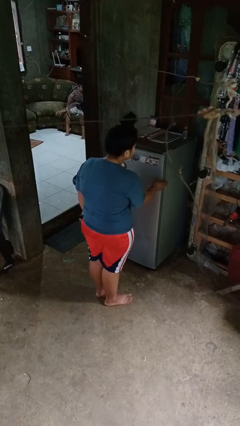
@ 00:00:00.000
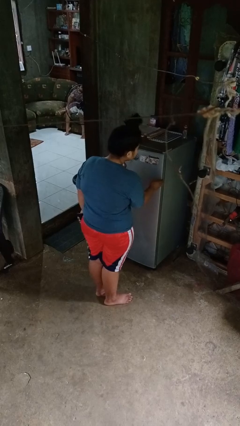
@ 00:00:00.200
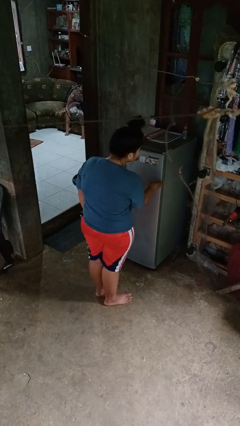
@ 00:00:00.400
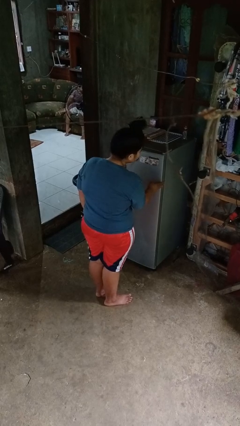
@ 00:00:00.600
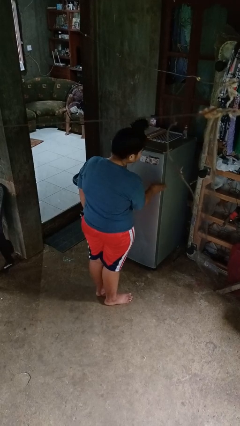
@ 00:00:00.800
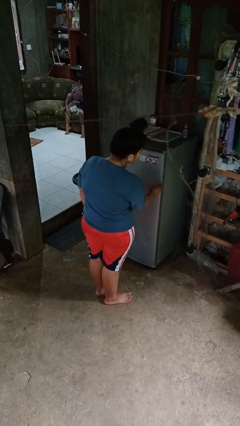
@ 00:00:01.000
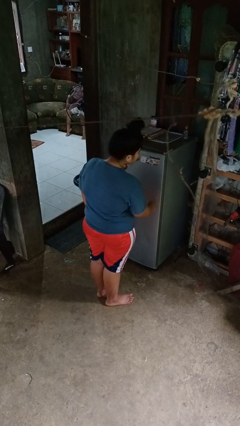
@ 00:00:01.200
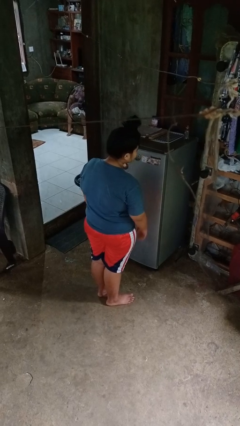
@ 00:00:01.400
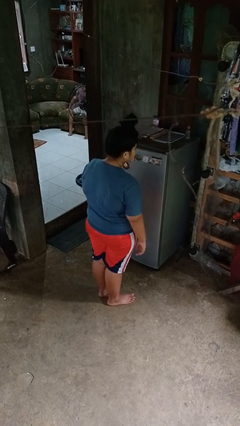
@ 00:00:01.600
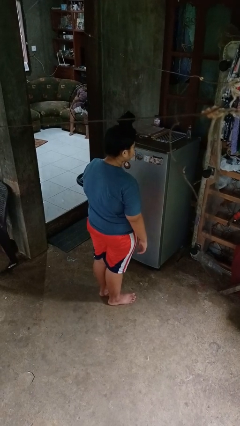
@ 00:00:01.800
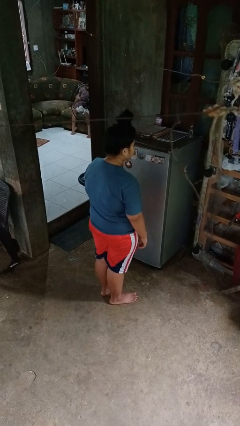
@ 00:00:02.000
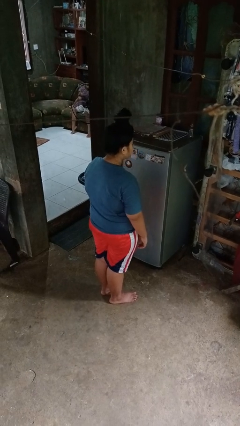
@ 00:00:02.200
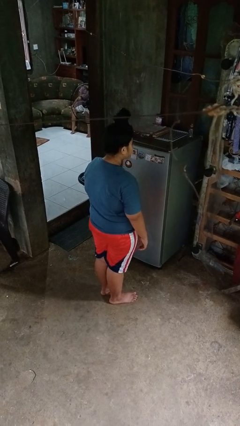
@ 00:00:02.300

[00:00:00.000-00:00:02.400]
person taps object with finger

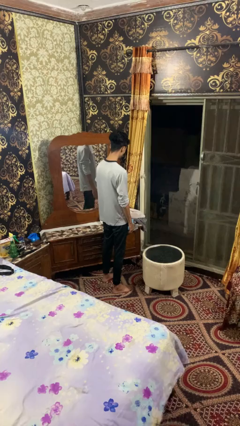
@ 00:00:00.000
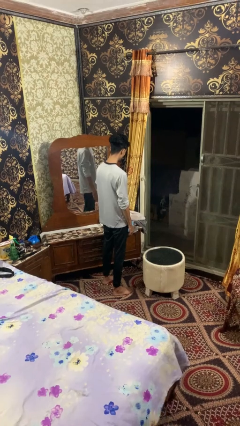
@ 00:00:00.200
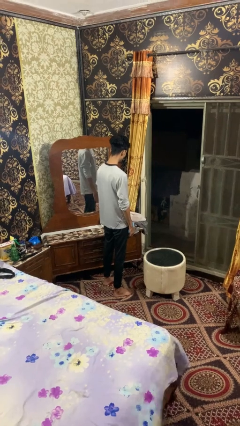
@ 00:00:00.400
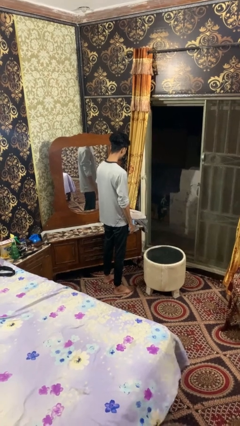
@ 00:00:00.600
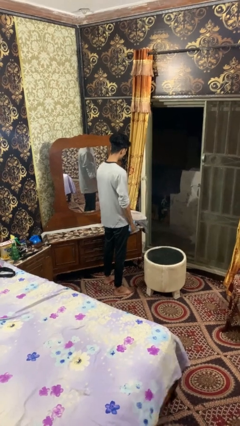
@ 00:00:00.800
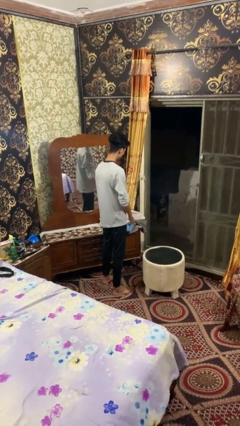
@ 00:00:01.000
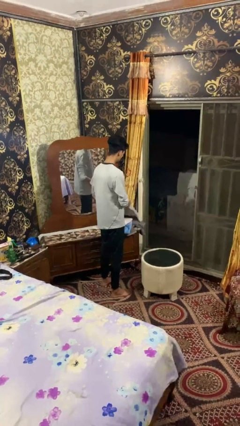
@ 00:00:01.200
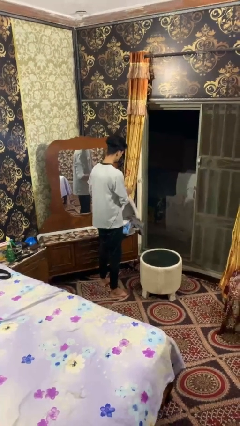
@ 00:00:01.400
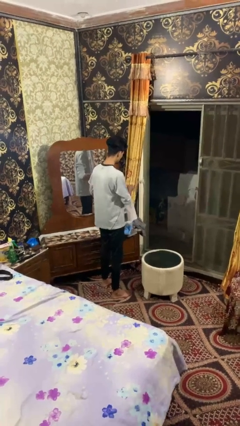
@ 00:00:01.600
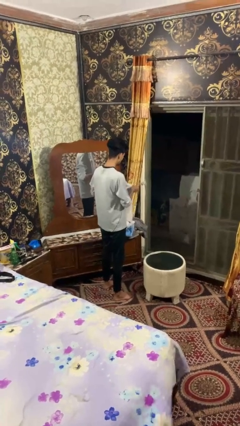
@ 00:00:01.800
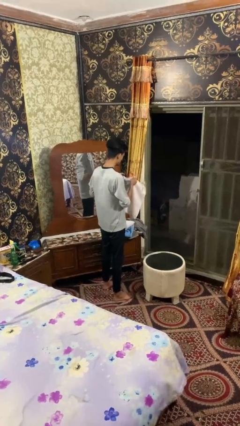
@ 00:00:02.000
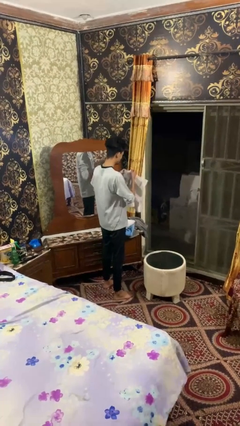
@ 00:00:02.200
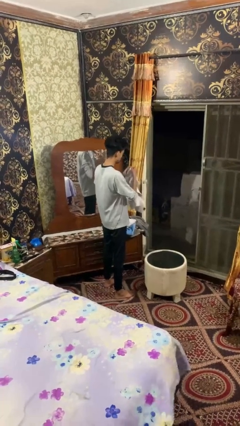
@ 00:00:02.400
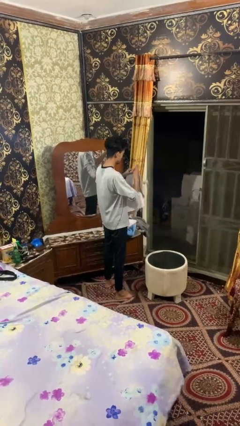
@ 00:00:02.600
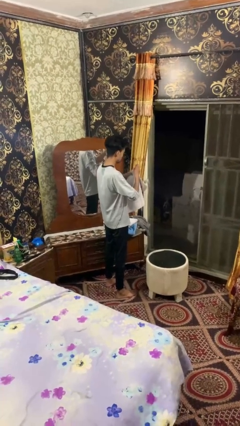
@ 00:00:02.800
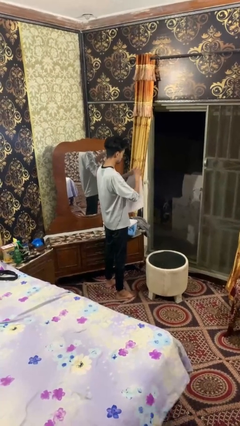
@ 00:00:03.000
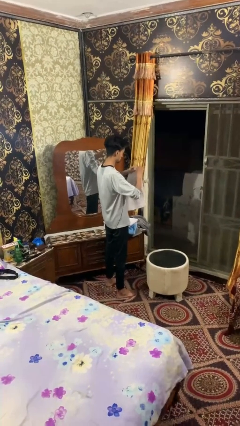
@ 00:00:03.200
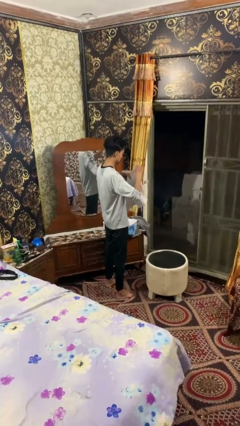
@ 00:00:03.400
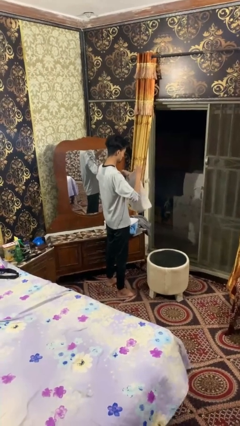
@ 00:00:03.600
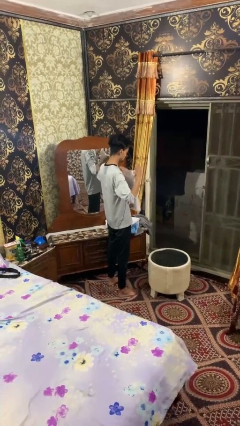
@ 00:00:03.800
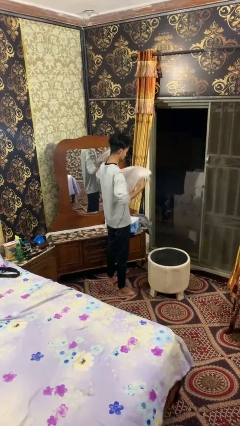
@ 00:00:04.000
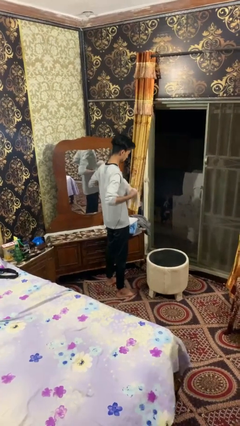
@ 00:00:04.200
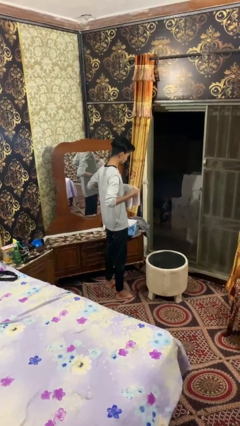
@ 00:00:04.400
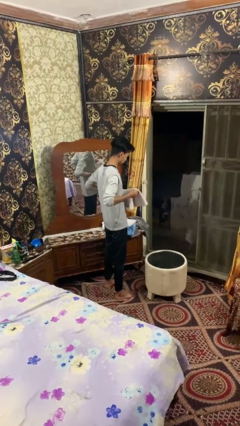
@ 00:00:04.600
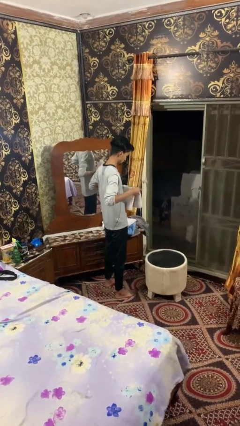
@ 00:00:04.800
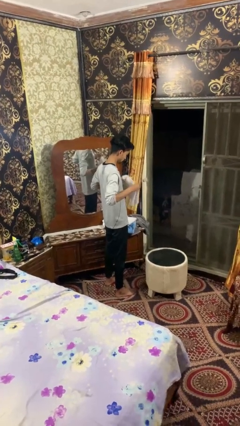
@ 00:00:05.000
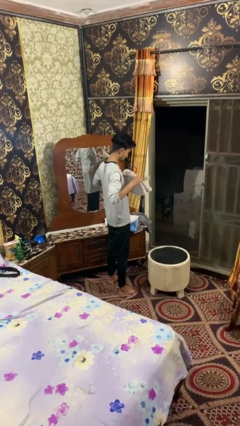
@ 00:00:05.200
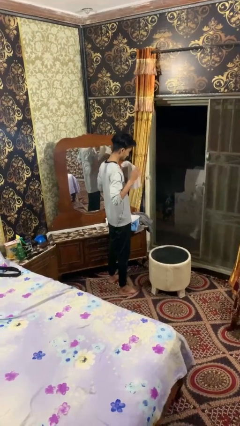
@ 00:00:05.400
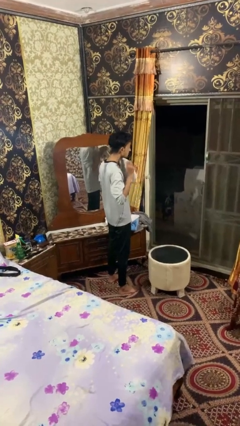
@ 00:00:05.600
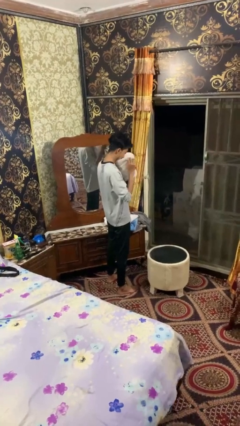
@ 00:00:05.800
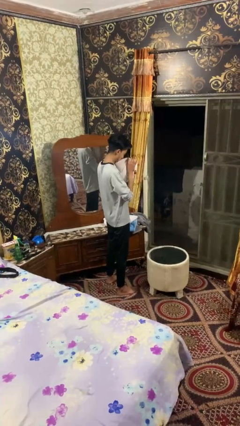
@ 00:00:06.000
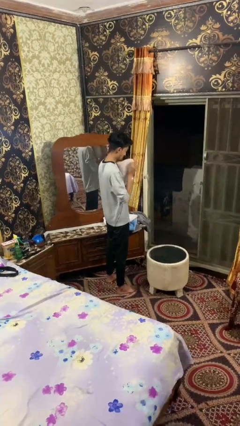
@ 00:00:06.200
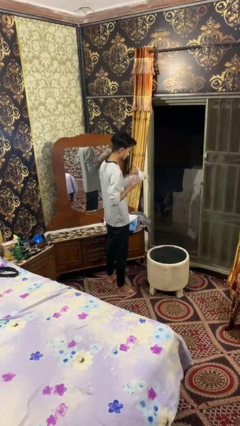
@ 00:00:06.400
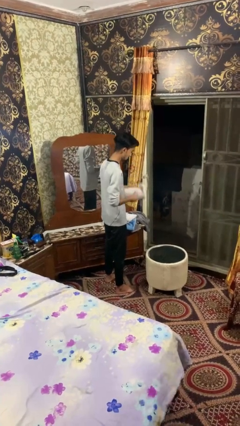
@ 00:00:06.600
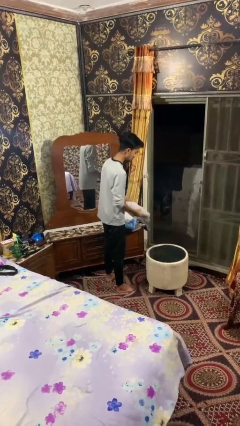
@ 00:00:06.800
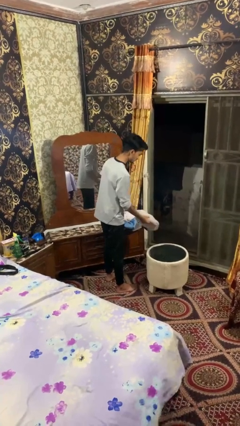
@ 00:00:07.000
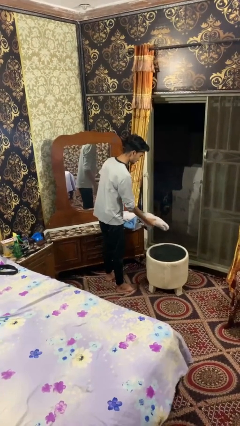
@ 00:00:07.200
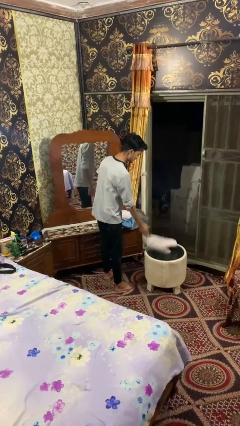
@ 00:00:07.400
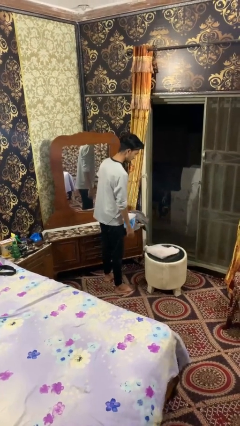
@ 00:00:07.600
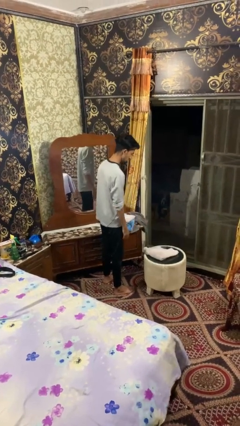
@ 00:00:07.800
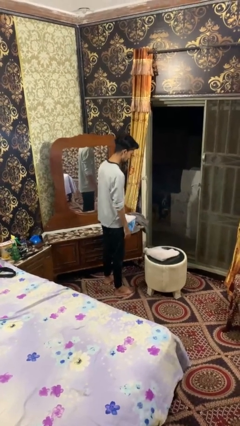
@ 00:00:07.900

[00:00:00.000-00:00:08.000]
person folds towel

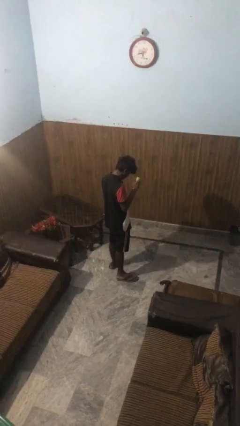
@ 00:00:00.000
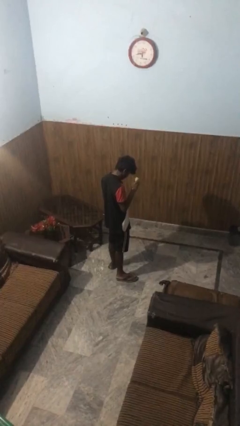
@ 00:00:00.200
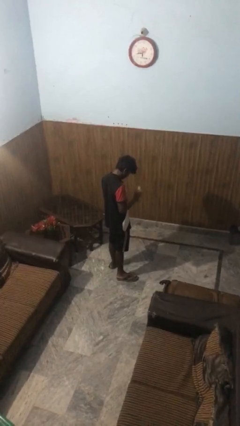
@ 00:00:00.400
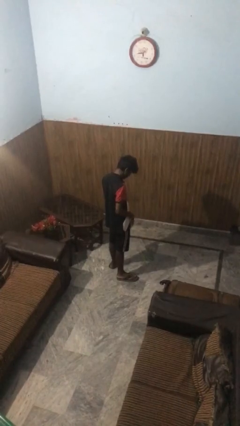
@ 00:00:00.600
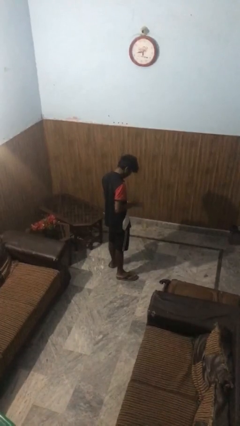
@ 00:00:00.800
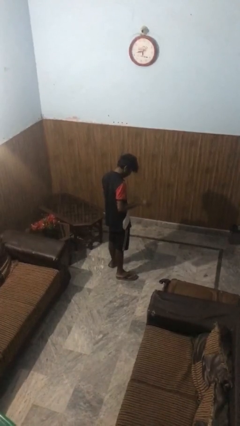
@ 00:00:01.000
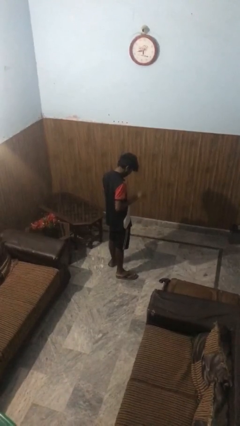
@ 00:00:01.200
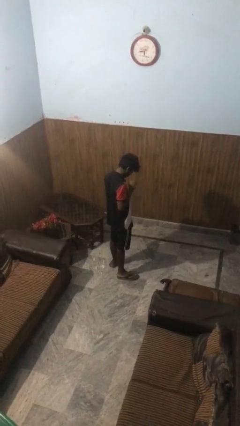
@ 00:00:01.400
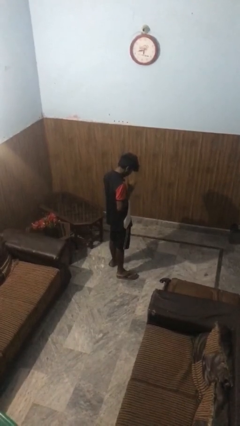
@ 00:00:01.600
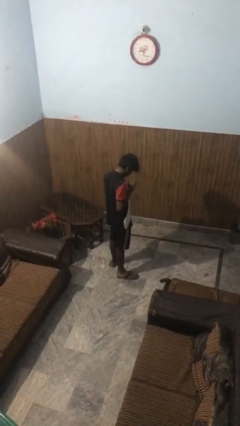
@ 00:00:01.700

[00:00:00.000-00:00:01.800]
person bounces ball on floor

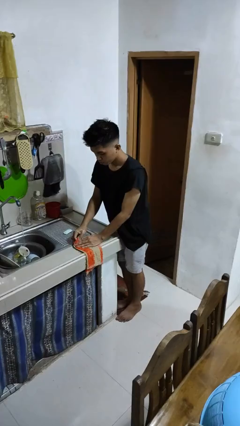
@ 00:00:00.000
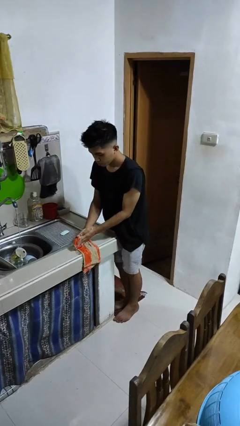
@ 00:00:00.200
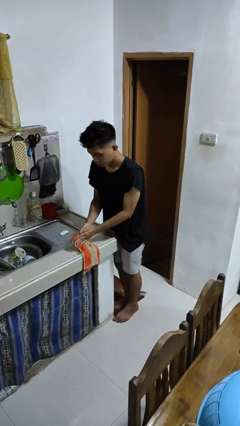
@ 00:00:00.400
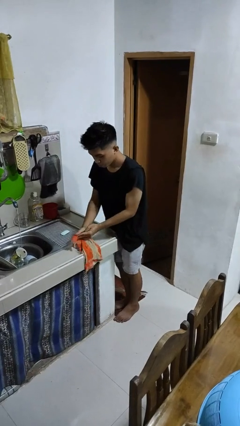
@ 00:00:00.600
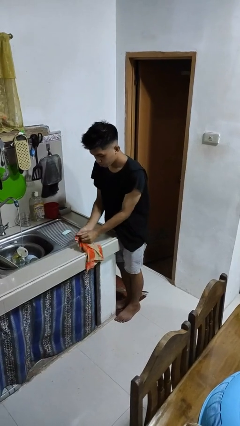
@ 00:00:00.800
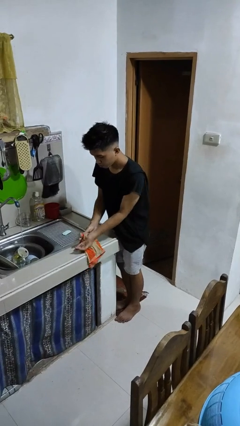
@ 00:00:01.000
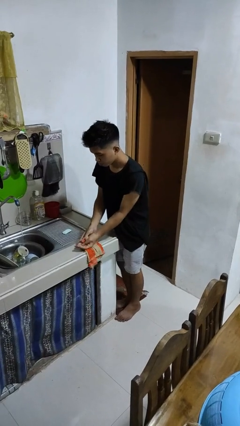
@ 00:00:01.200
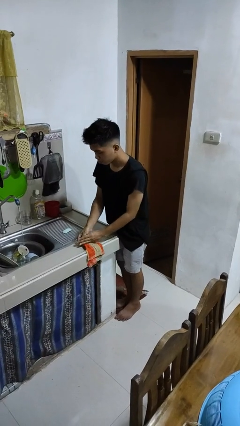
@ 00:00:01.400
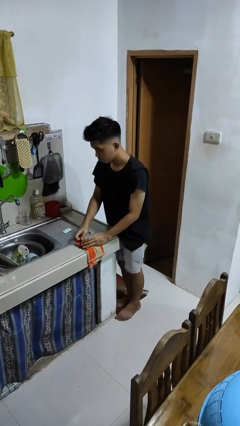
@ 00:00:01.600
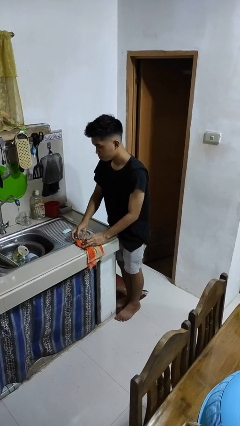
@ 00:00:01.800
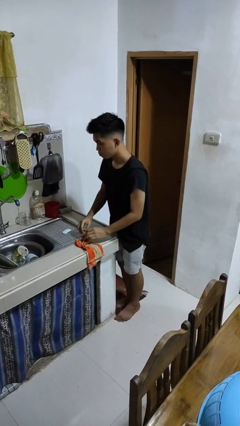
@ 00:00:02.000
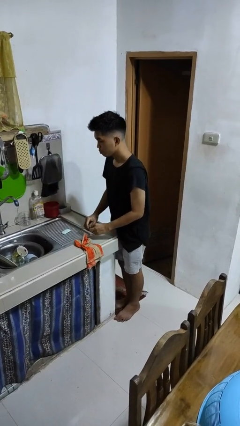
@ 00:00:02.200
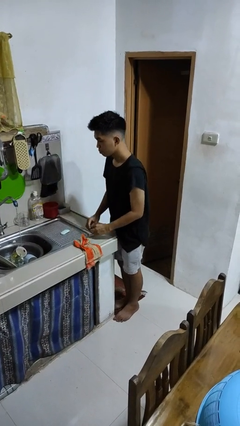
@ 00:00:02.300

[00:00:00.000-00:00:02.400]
person dries hands with towel

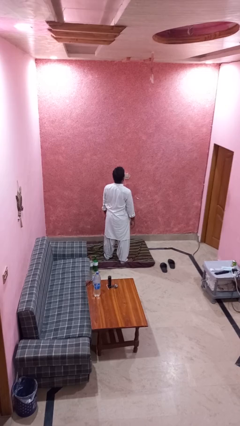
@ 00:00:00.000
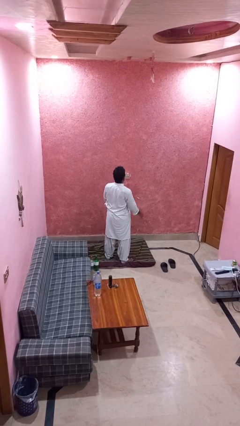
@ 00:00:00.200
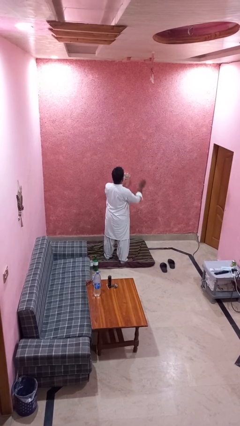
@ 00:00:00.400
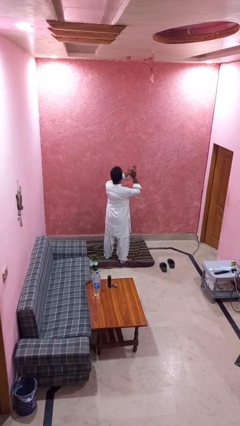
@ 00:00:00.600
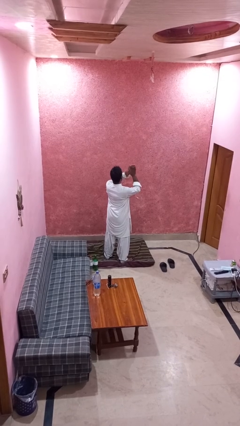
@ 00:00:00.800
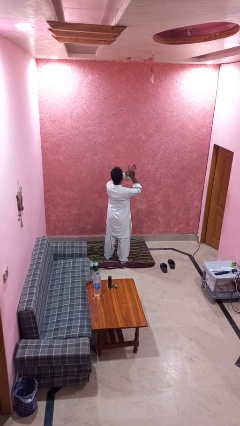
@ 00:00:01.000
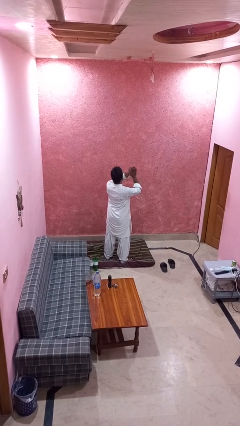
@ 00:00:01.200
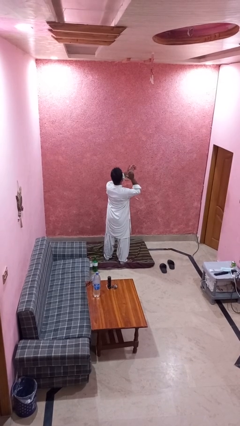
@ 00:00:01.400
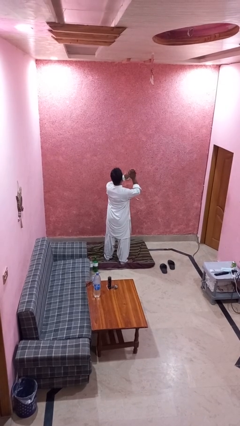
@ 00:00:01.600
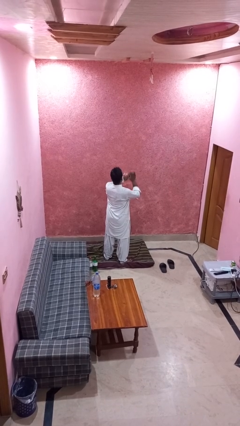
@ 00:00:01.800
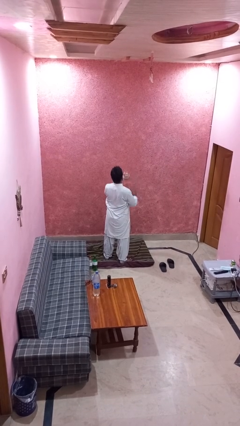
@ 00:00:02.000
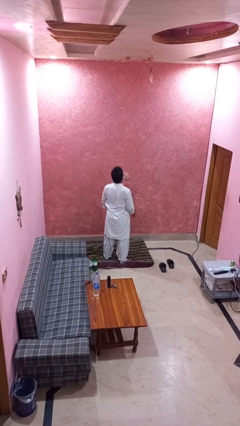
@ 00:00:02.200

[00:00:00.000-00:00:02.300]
person claps hands

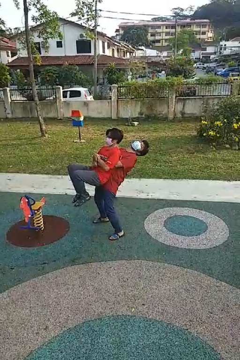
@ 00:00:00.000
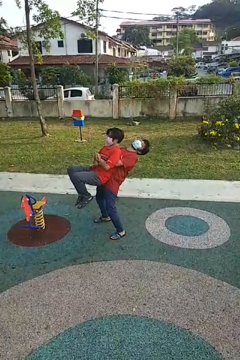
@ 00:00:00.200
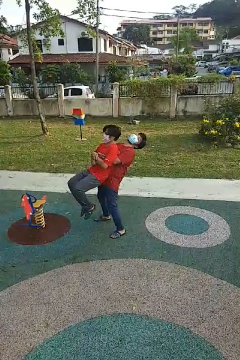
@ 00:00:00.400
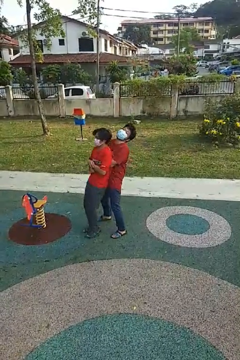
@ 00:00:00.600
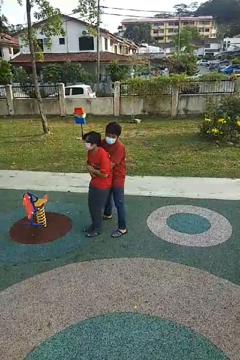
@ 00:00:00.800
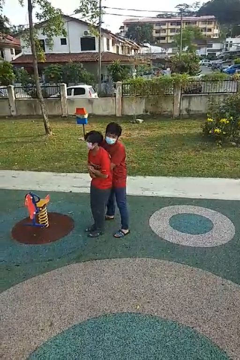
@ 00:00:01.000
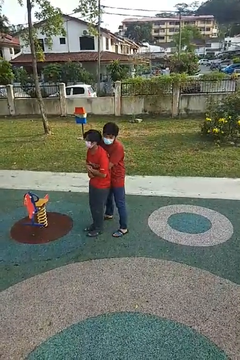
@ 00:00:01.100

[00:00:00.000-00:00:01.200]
person puts down person
